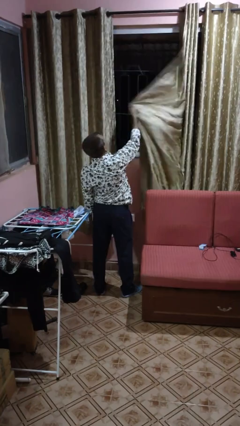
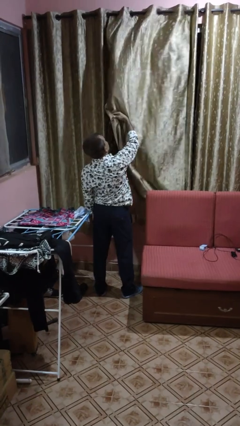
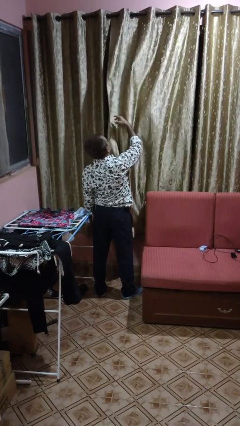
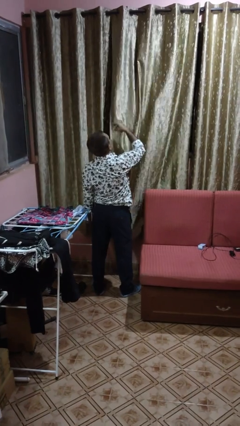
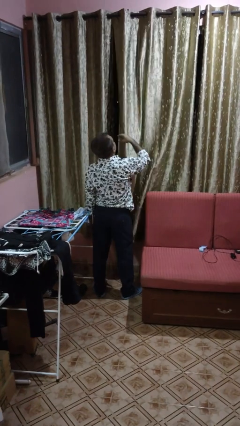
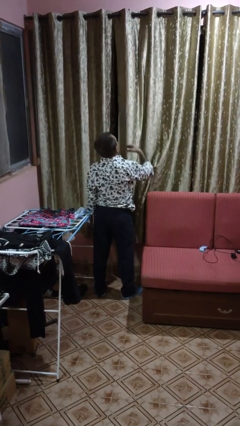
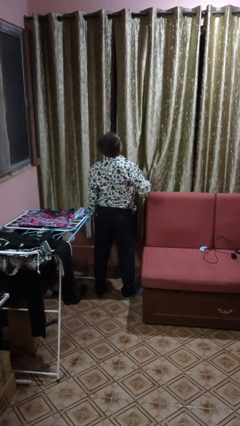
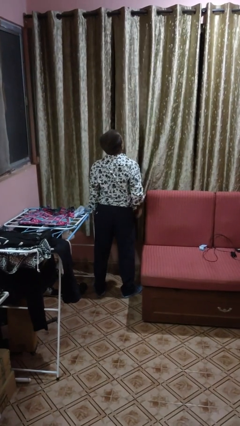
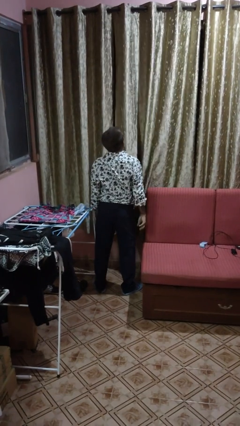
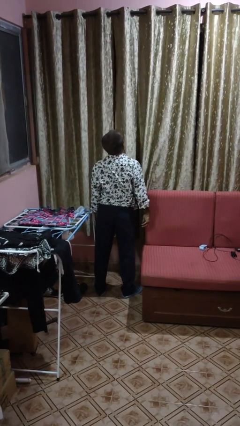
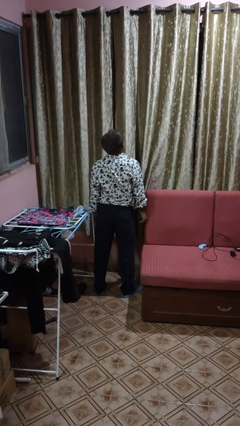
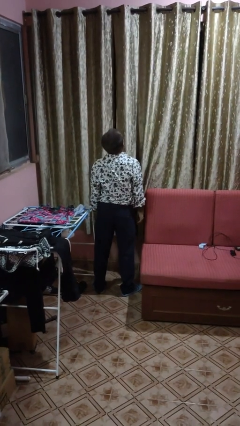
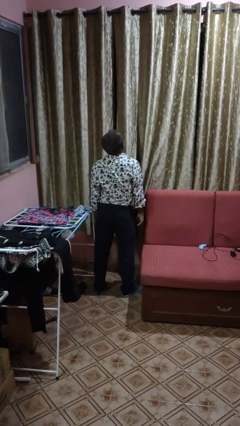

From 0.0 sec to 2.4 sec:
person closes curtains

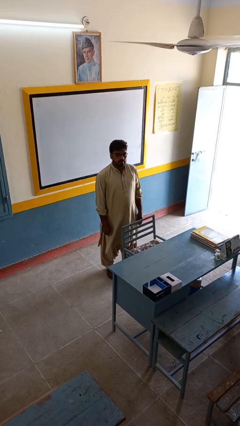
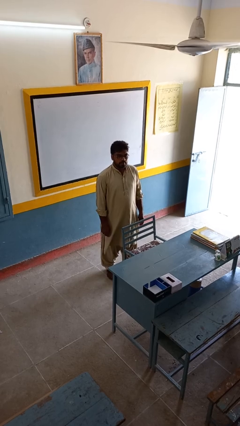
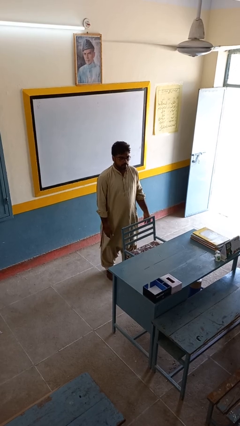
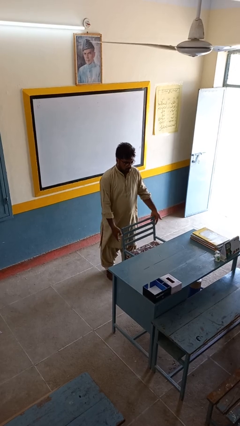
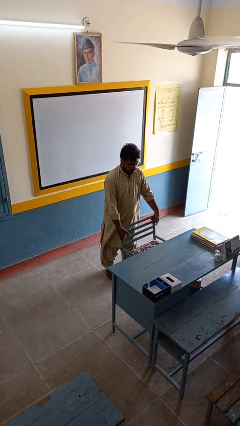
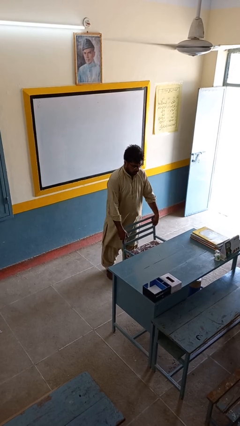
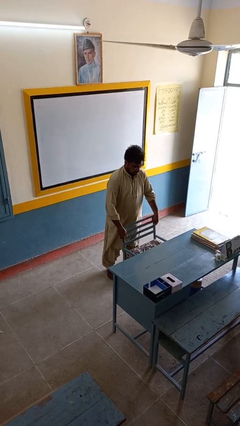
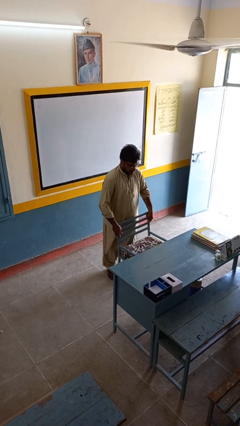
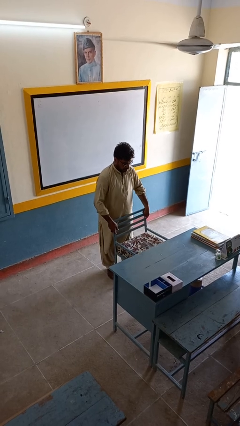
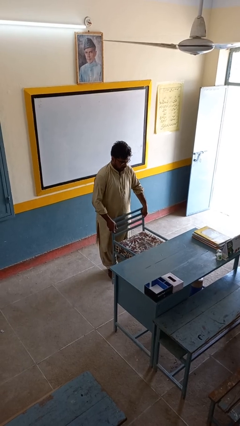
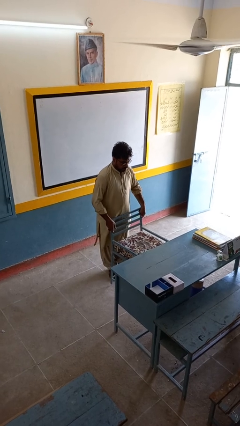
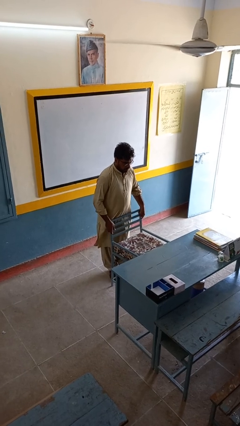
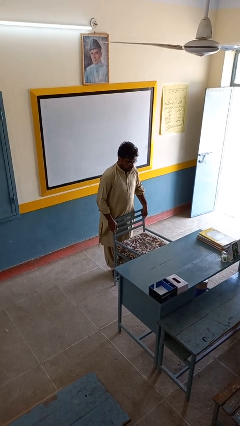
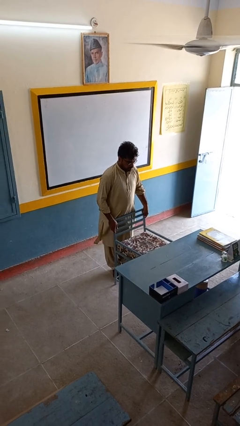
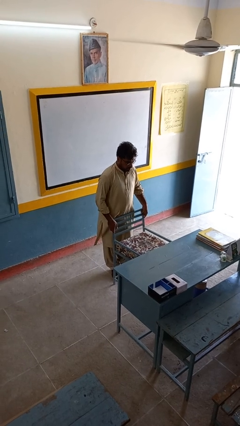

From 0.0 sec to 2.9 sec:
person pulls out chair

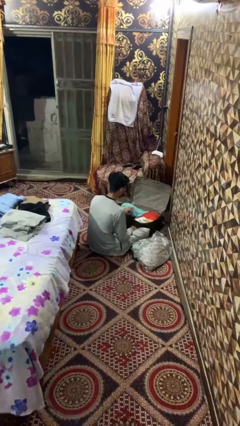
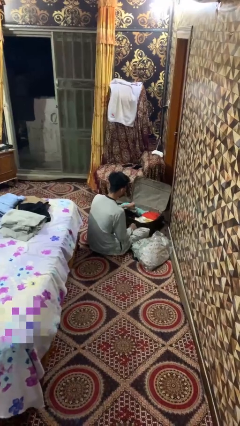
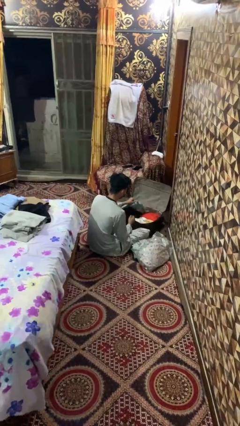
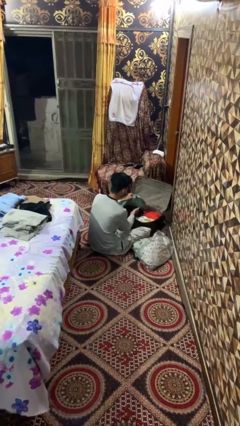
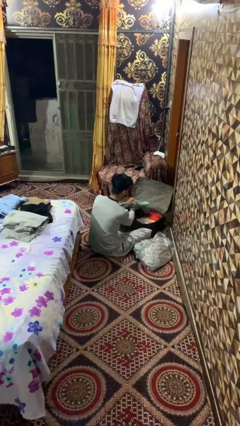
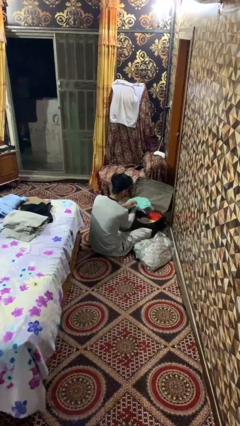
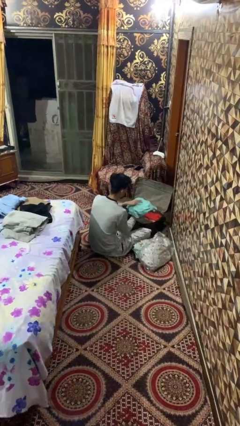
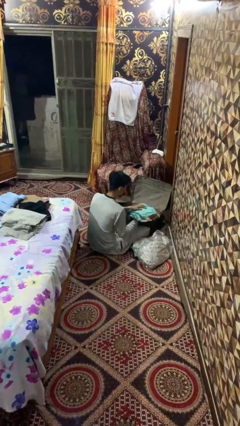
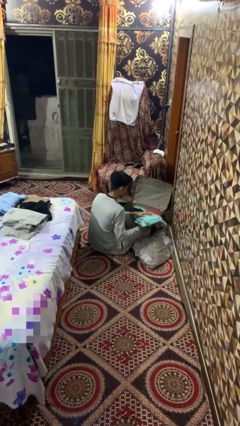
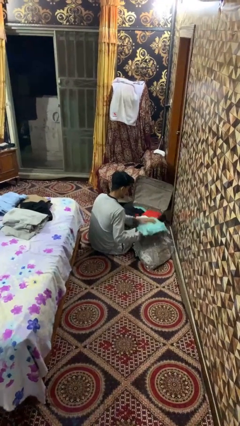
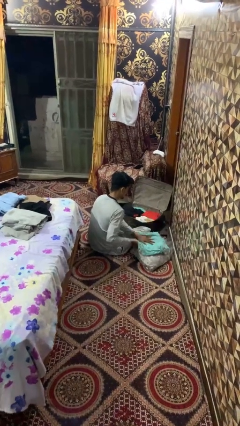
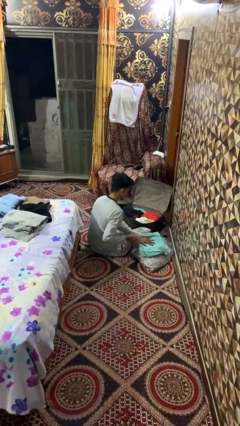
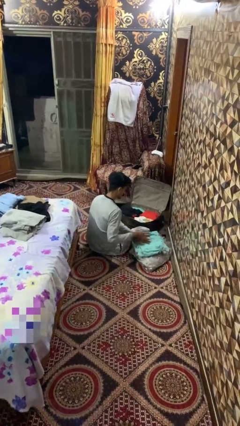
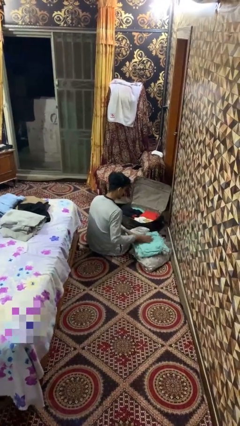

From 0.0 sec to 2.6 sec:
person unloads clothes from suitcase

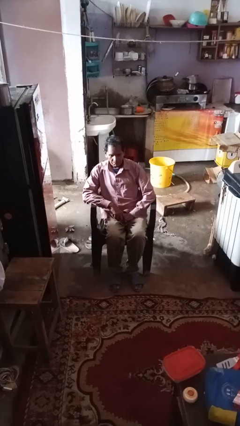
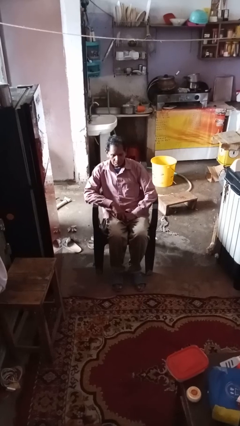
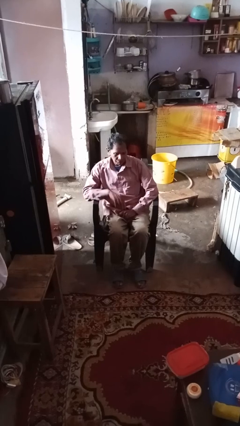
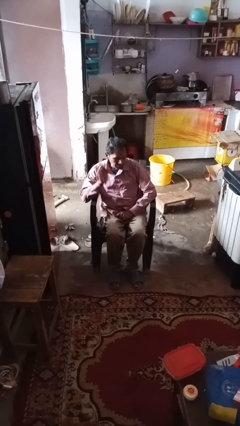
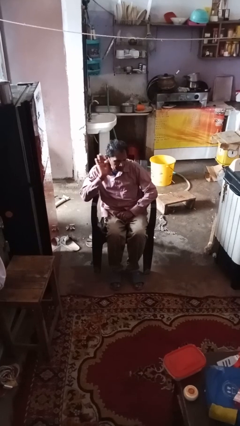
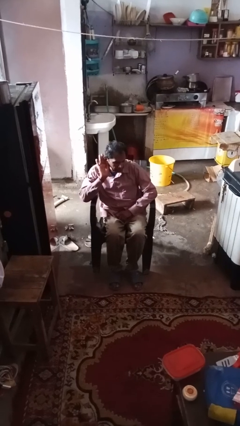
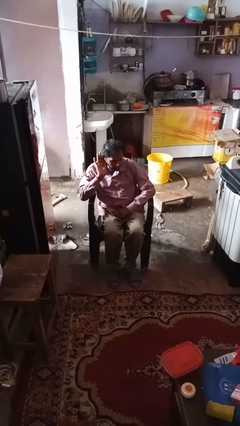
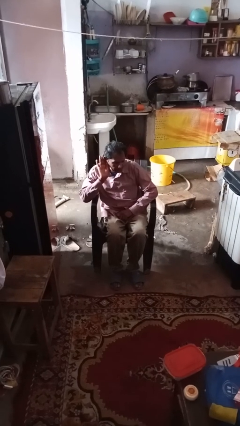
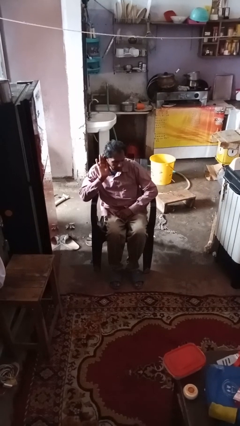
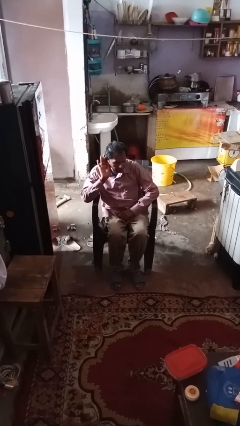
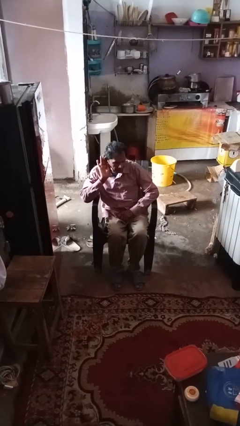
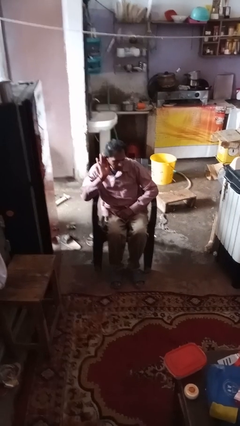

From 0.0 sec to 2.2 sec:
person gestures listen closely

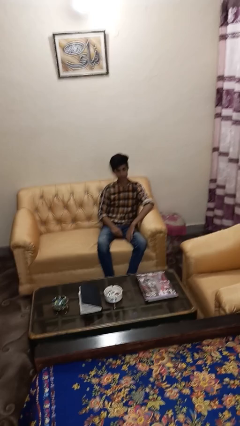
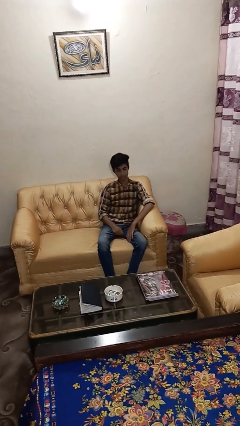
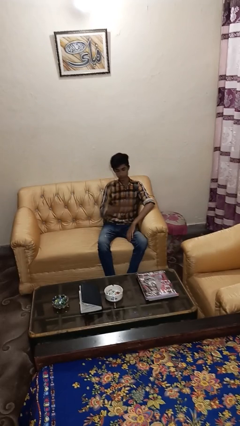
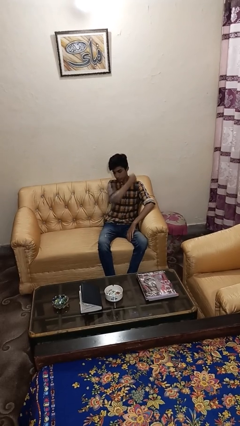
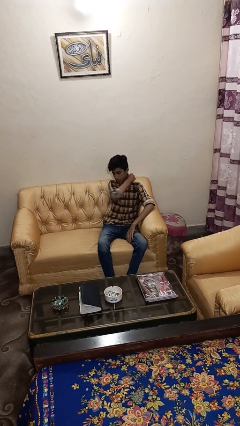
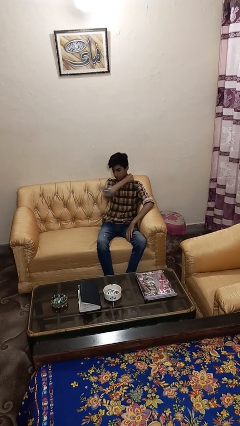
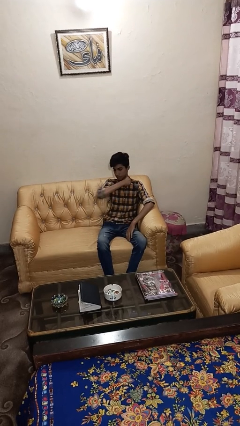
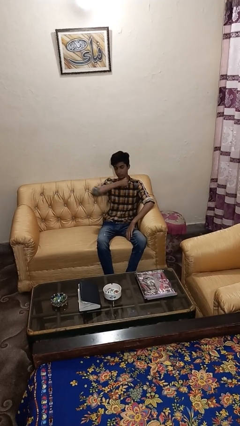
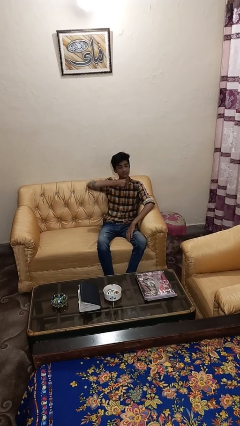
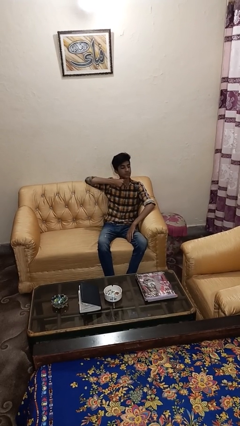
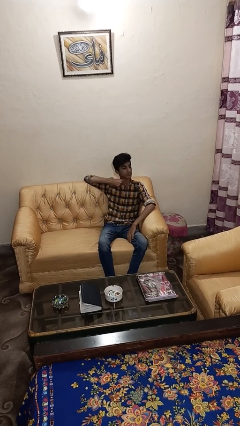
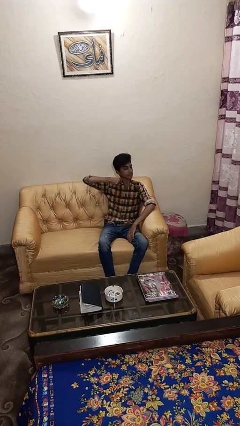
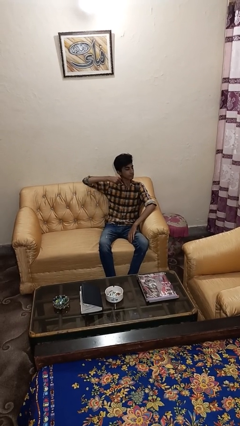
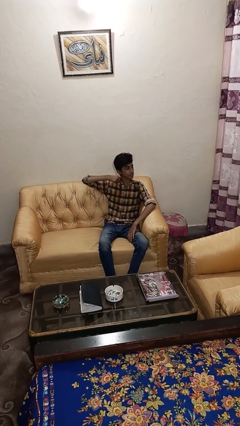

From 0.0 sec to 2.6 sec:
person gestures cut

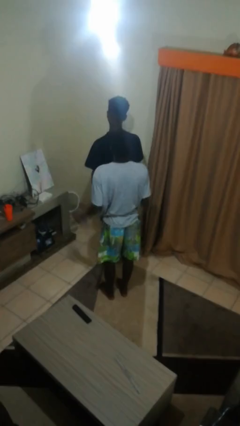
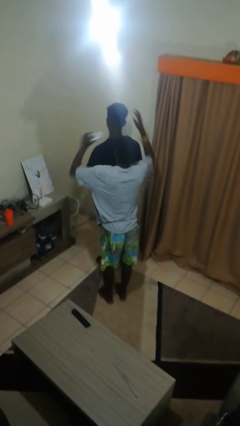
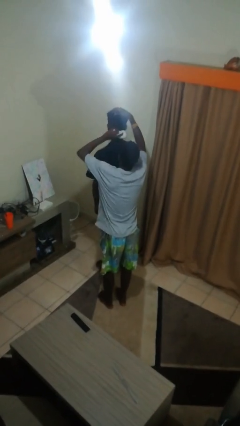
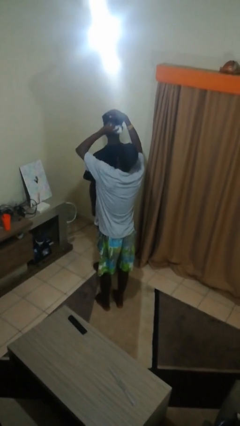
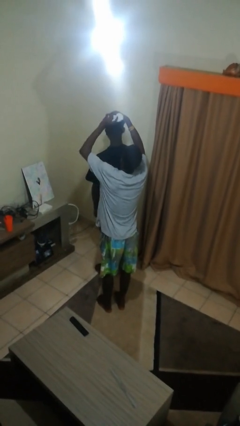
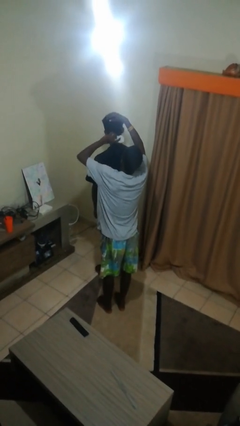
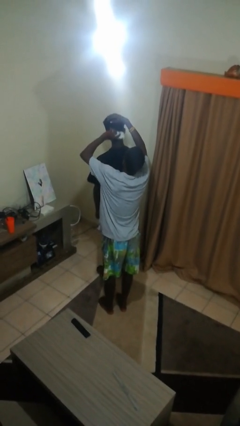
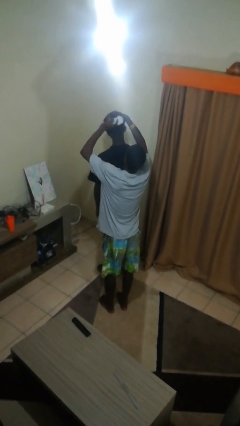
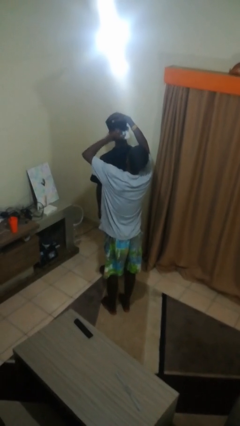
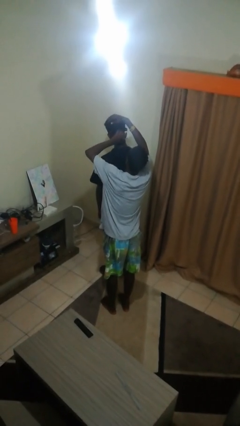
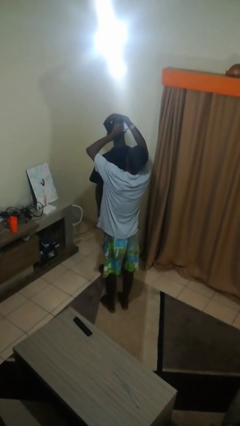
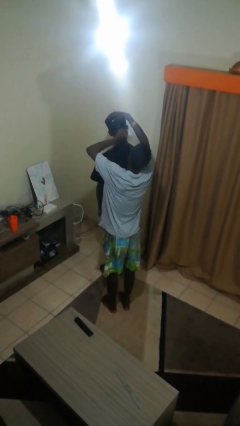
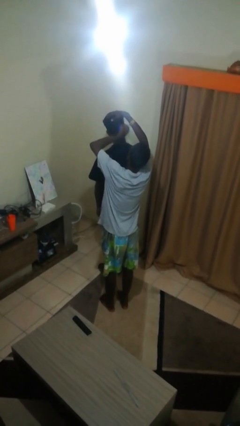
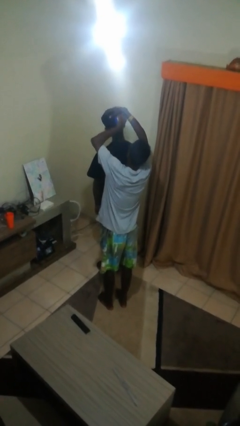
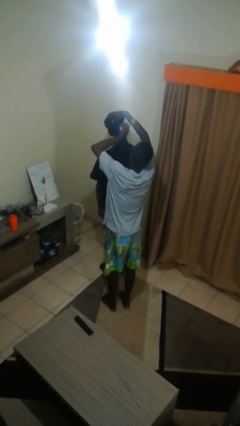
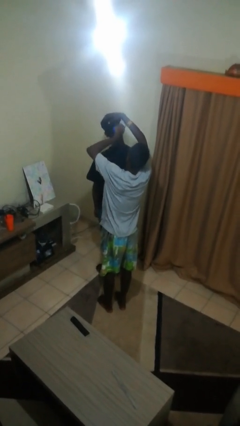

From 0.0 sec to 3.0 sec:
person brushes hair of person

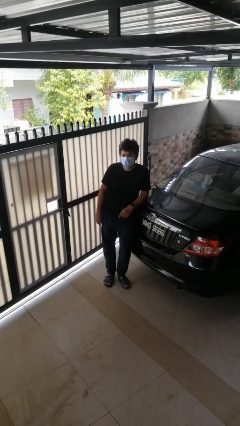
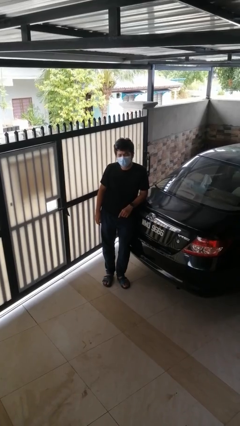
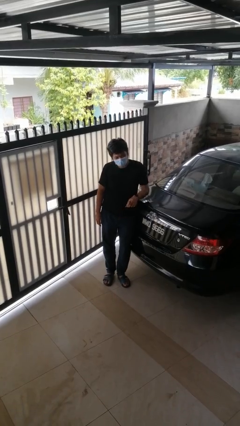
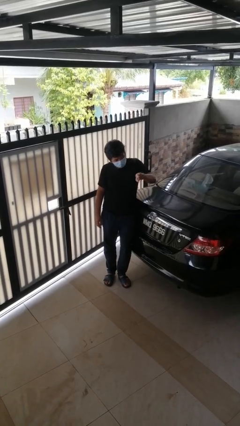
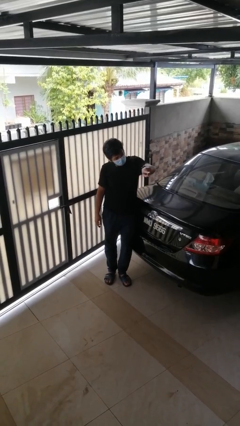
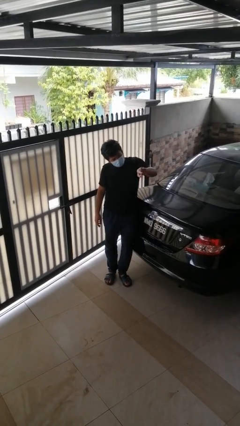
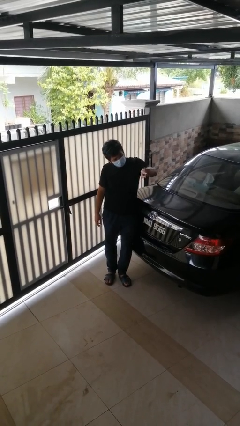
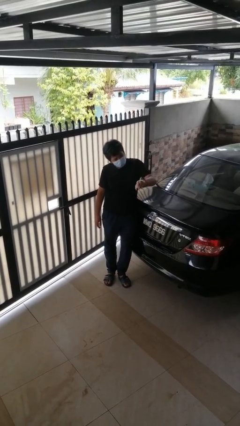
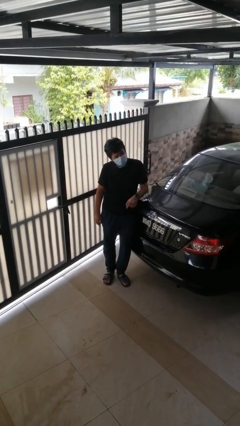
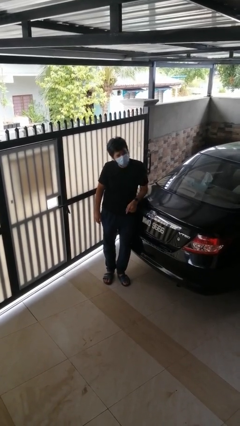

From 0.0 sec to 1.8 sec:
person points at person
